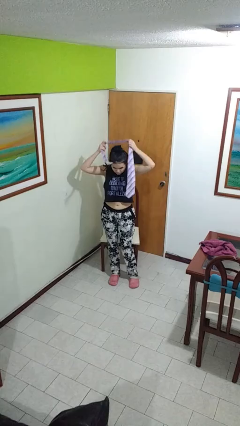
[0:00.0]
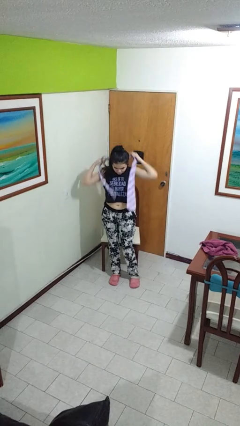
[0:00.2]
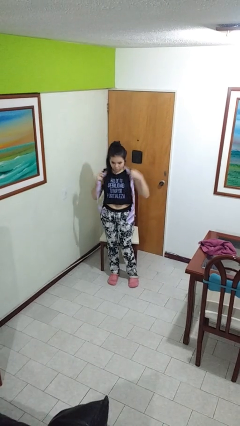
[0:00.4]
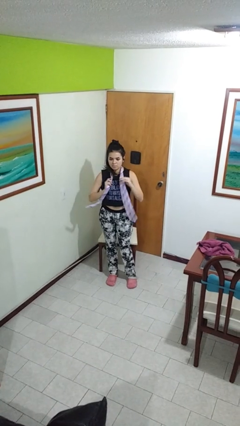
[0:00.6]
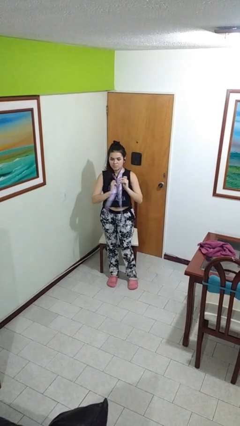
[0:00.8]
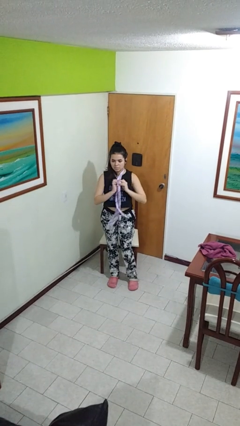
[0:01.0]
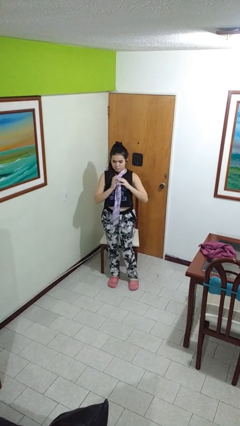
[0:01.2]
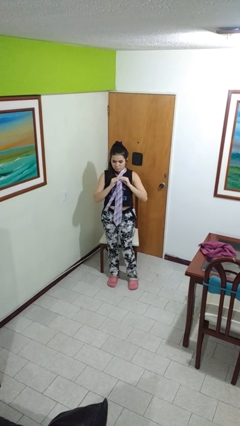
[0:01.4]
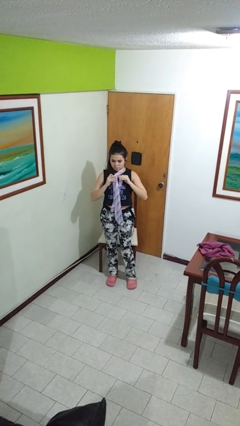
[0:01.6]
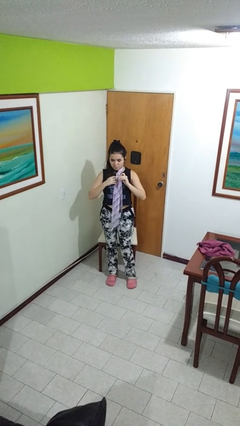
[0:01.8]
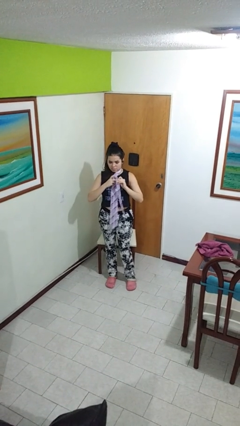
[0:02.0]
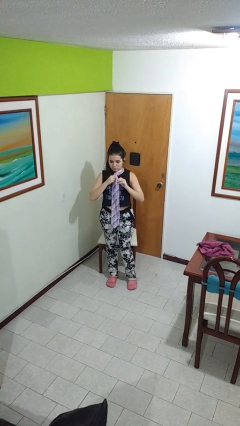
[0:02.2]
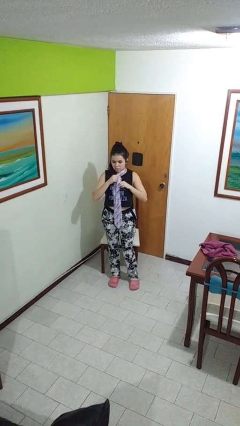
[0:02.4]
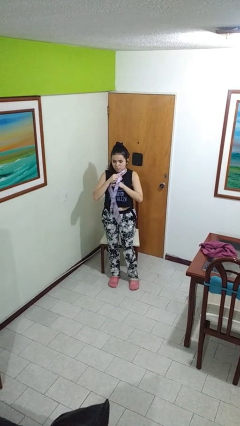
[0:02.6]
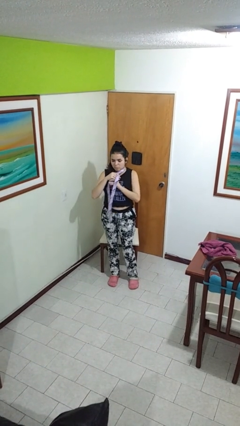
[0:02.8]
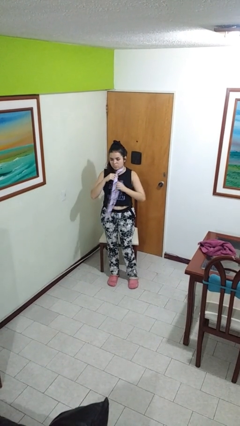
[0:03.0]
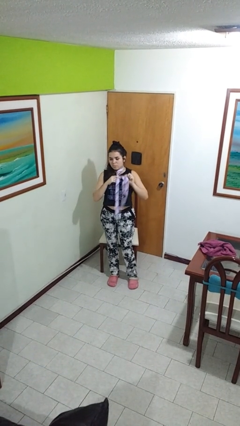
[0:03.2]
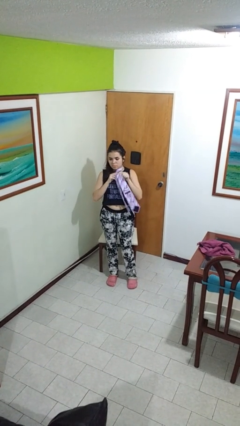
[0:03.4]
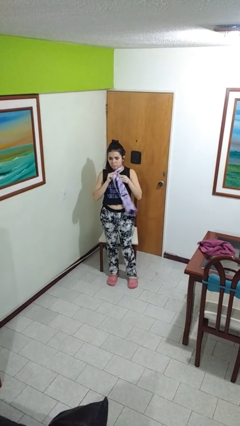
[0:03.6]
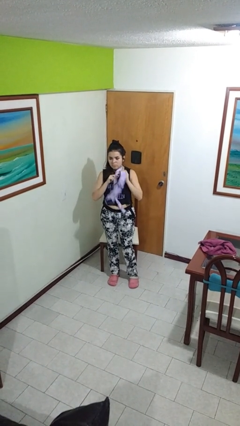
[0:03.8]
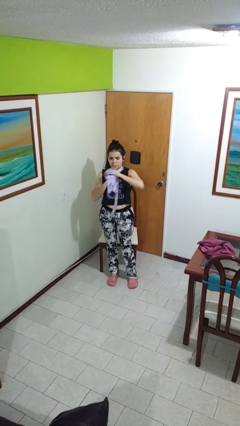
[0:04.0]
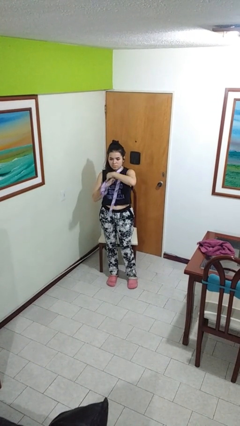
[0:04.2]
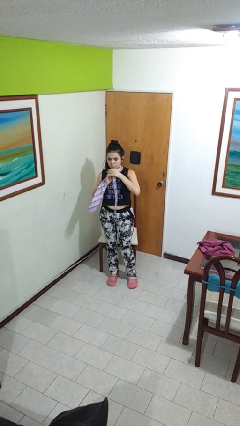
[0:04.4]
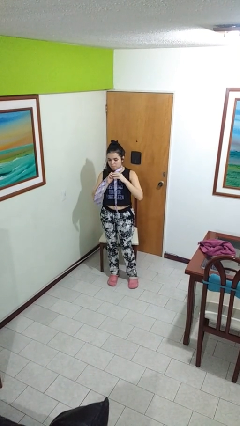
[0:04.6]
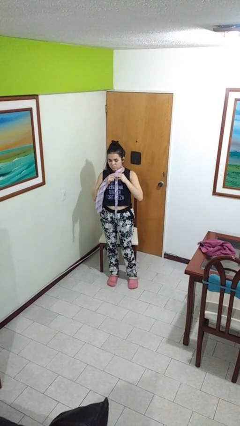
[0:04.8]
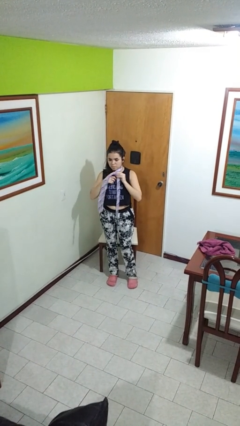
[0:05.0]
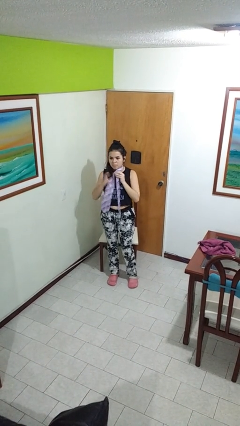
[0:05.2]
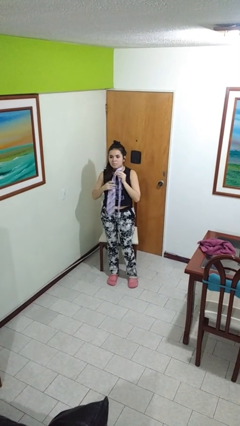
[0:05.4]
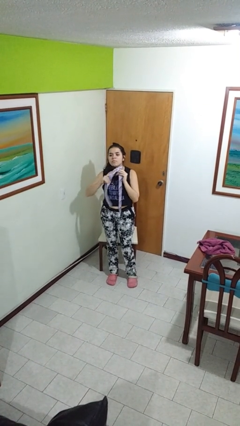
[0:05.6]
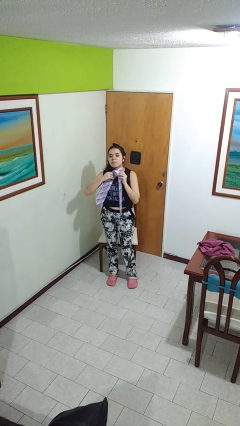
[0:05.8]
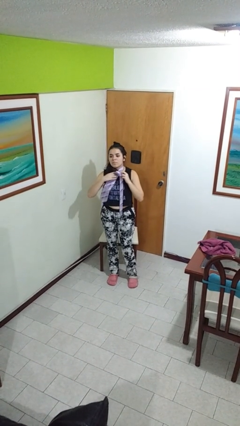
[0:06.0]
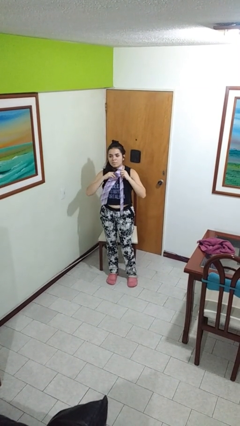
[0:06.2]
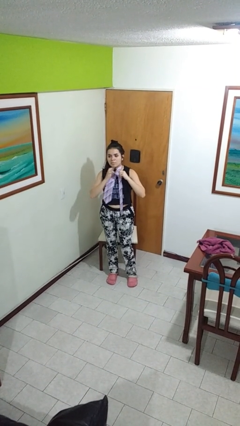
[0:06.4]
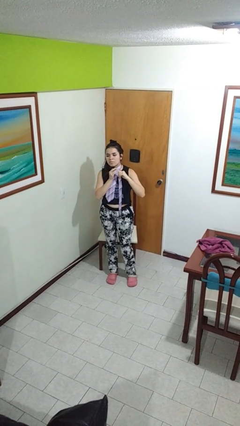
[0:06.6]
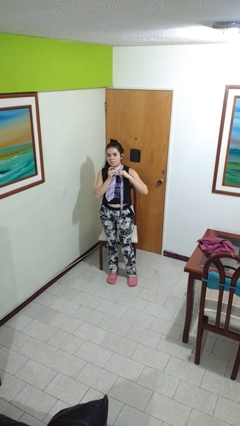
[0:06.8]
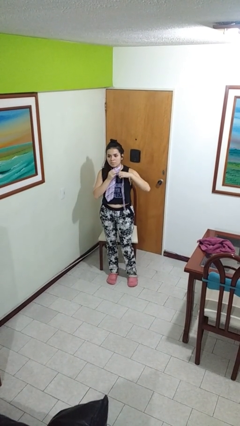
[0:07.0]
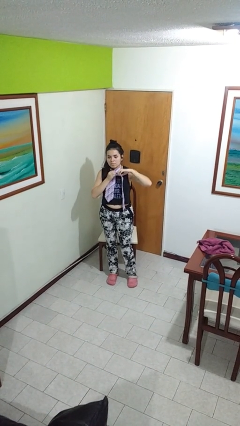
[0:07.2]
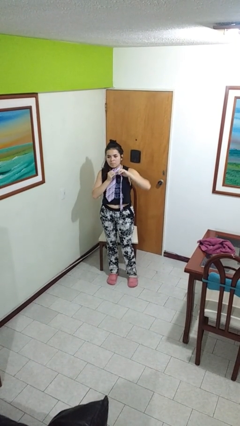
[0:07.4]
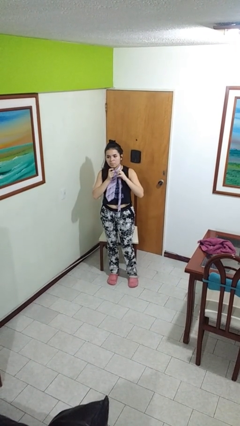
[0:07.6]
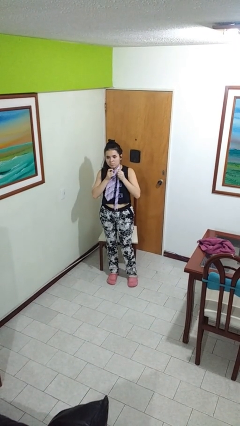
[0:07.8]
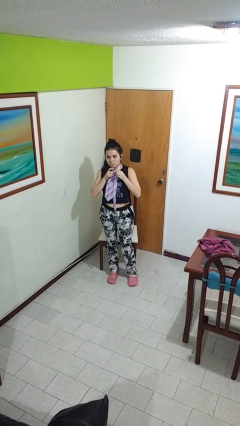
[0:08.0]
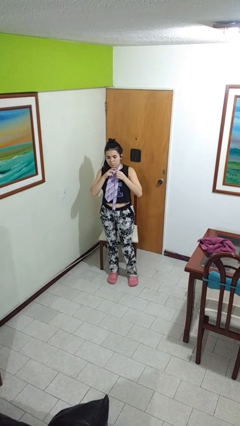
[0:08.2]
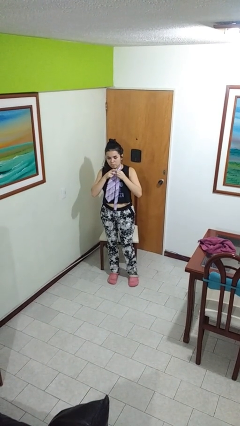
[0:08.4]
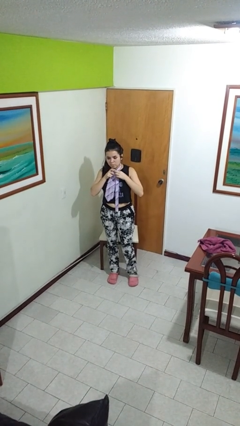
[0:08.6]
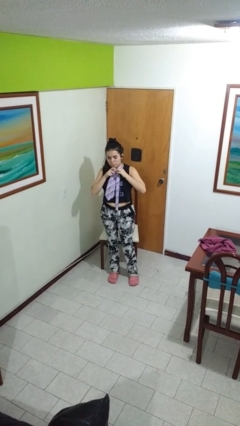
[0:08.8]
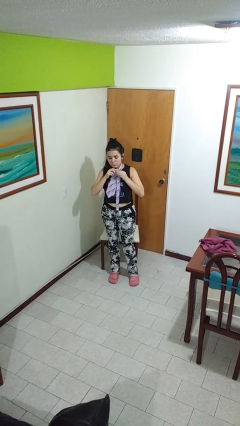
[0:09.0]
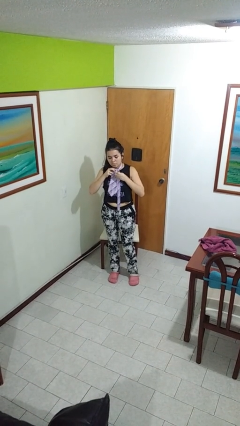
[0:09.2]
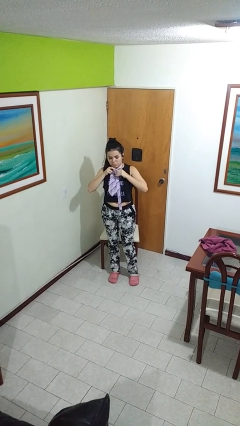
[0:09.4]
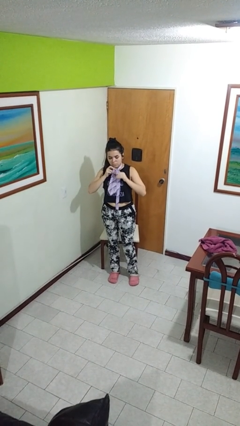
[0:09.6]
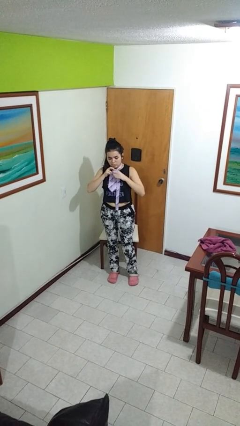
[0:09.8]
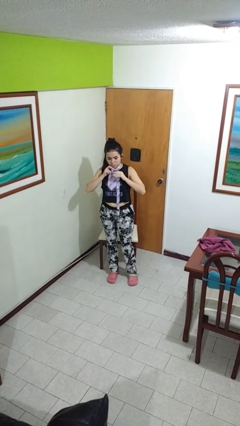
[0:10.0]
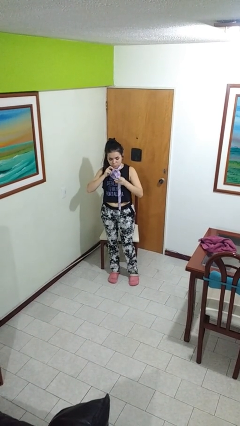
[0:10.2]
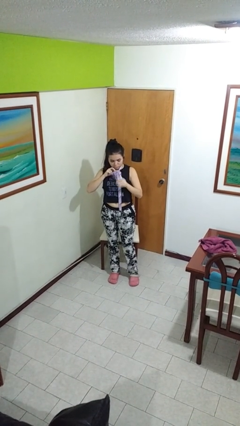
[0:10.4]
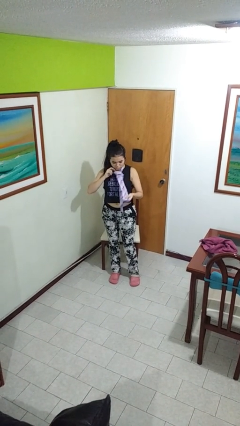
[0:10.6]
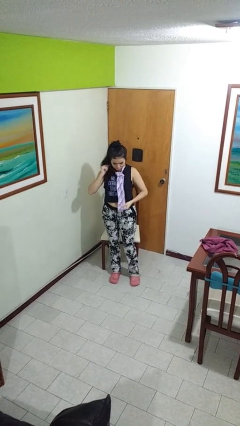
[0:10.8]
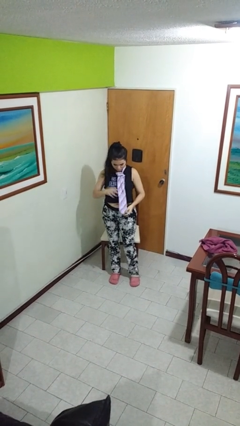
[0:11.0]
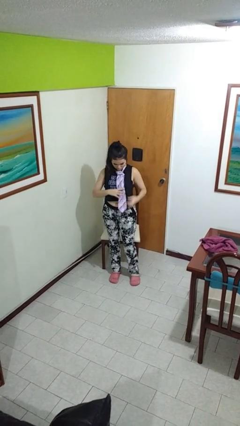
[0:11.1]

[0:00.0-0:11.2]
person puts on necktie

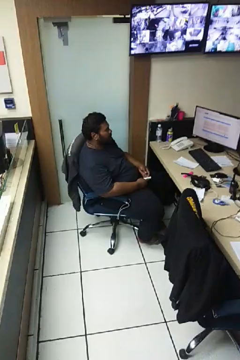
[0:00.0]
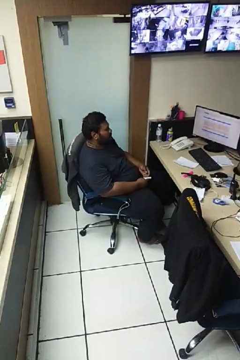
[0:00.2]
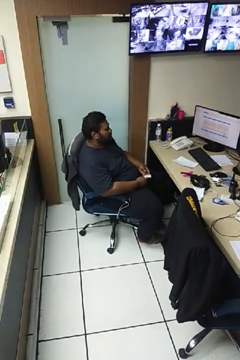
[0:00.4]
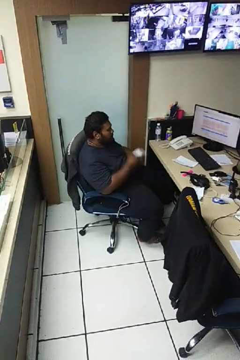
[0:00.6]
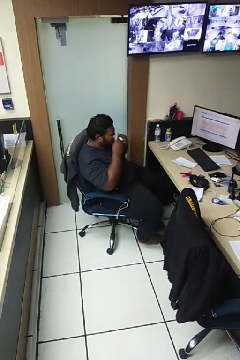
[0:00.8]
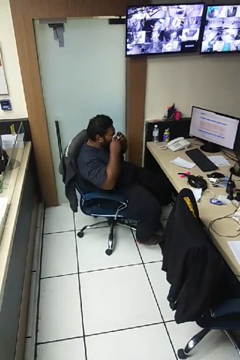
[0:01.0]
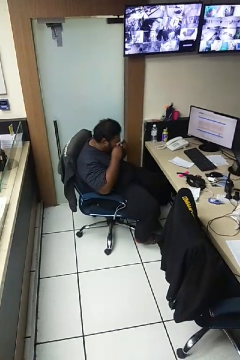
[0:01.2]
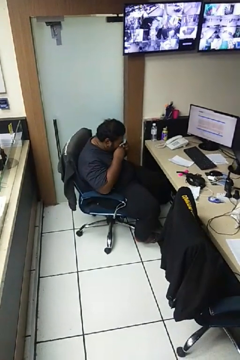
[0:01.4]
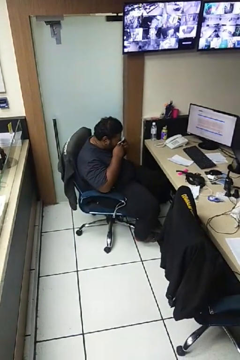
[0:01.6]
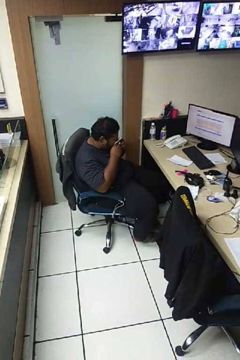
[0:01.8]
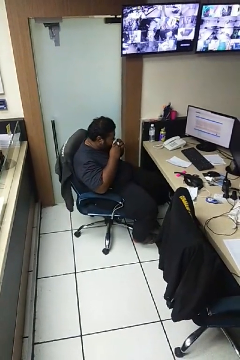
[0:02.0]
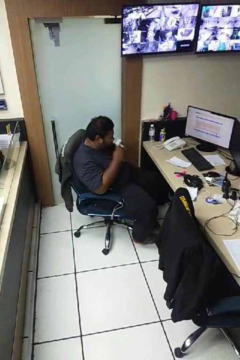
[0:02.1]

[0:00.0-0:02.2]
person blows nose

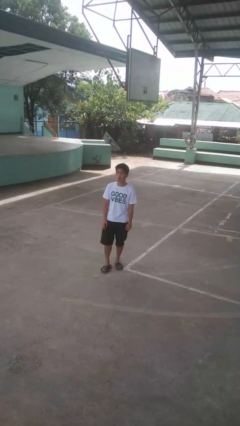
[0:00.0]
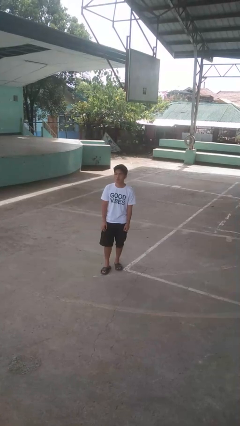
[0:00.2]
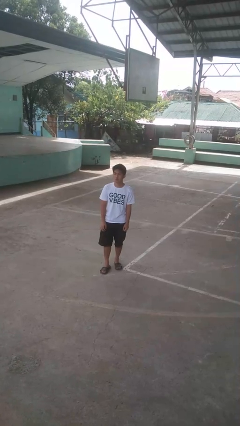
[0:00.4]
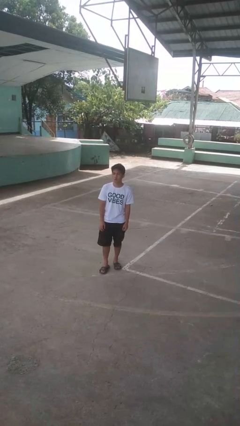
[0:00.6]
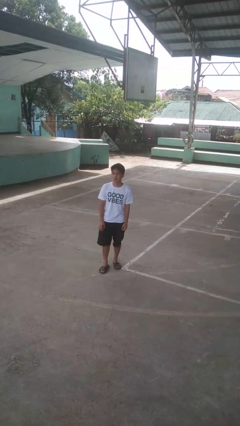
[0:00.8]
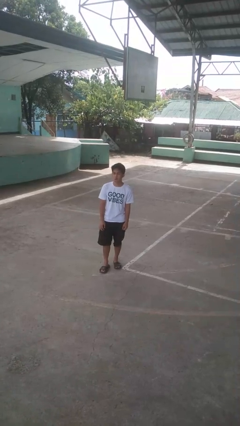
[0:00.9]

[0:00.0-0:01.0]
person sticks out tongue

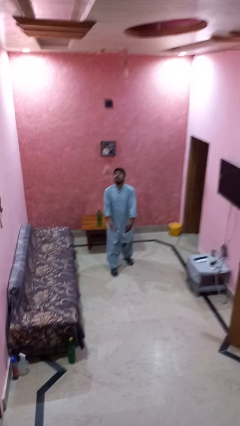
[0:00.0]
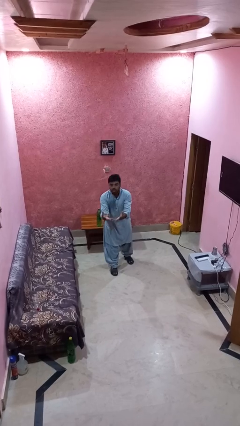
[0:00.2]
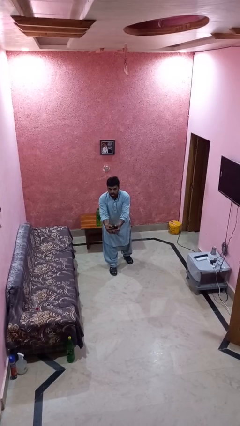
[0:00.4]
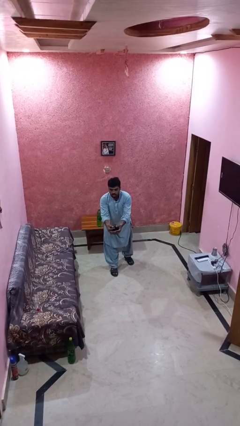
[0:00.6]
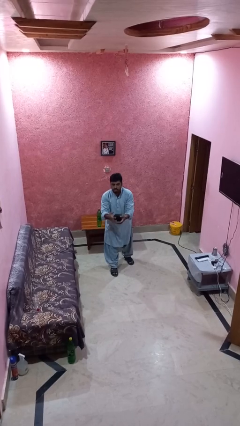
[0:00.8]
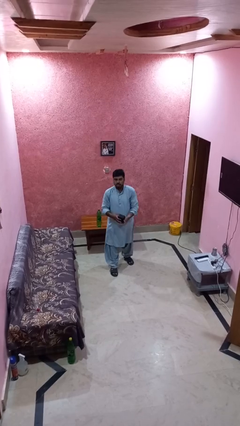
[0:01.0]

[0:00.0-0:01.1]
person catches dropped object

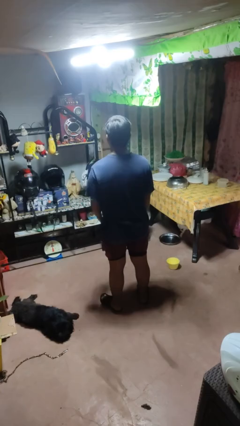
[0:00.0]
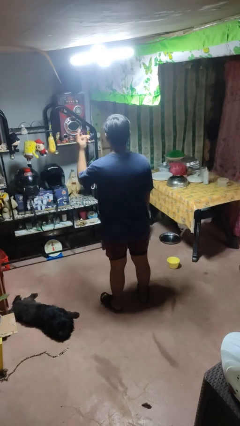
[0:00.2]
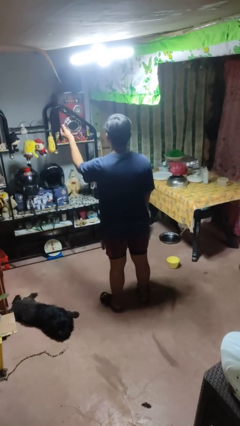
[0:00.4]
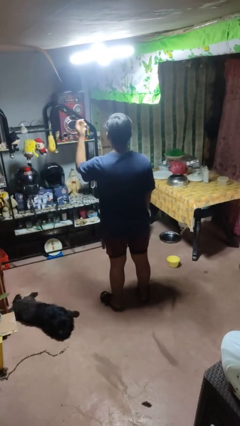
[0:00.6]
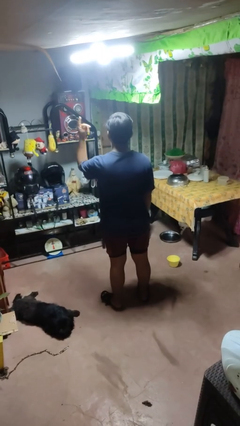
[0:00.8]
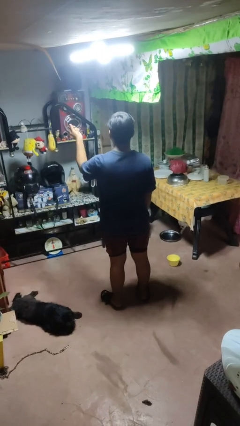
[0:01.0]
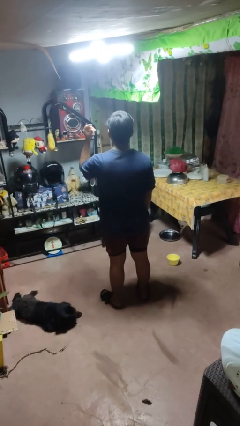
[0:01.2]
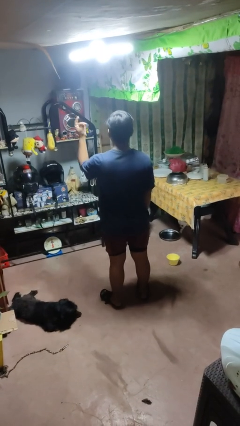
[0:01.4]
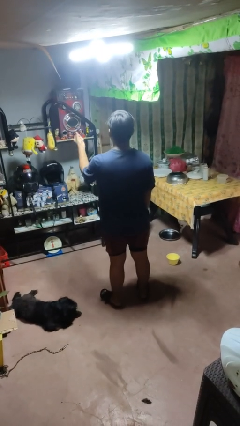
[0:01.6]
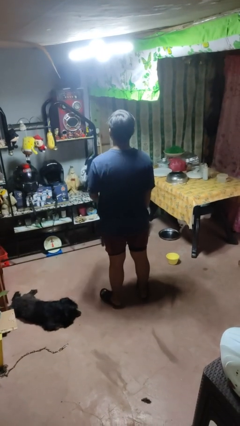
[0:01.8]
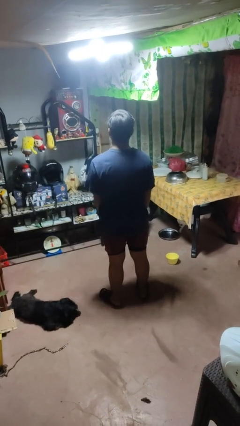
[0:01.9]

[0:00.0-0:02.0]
person snaps fingers

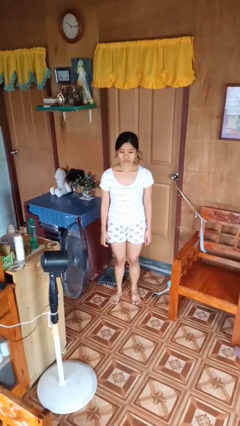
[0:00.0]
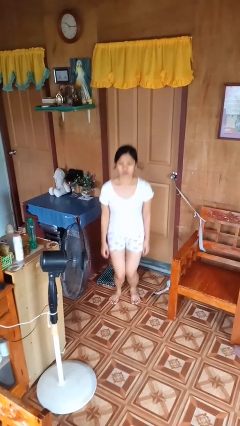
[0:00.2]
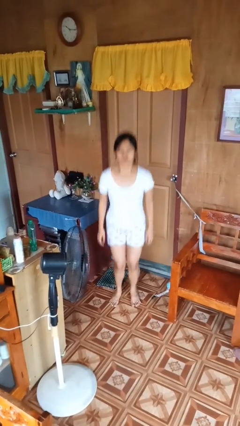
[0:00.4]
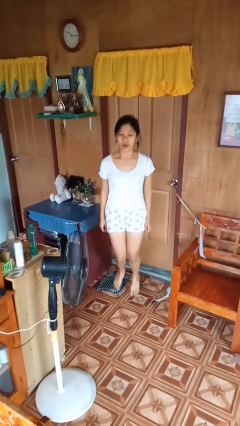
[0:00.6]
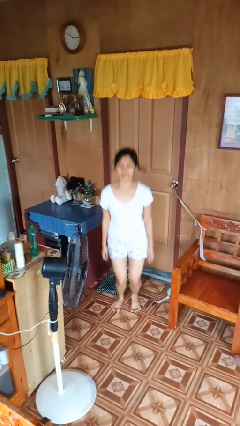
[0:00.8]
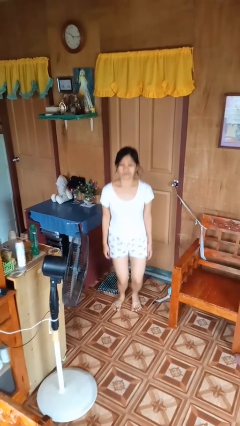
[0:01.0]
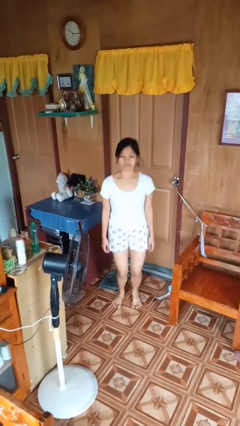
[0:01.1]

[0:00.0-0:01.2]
person jumps
